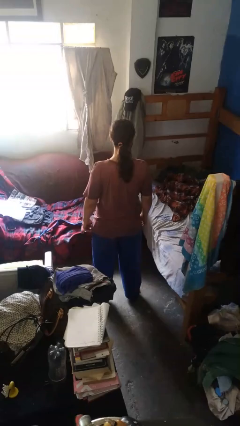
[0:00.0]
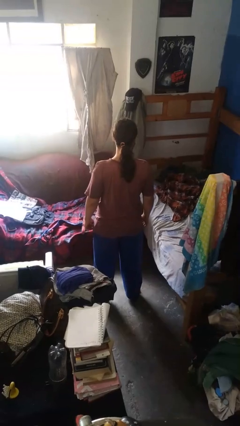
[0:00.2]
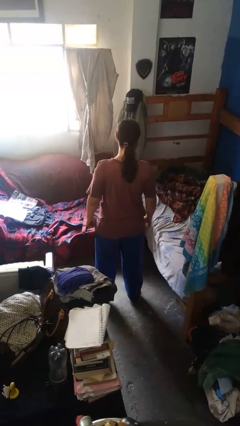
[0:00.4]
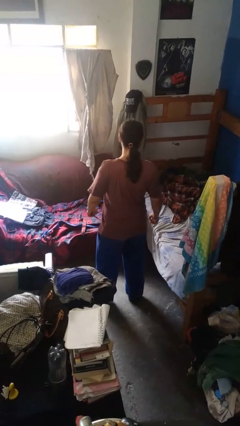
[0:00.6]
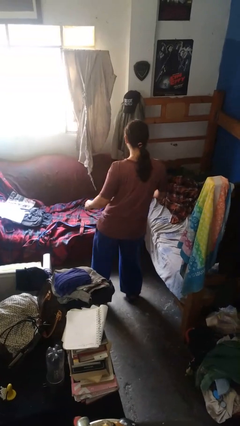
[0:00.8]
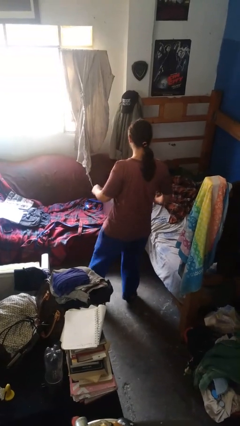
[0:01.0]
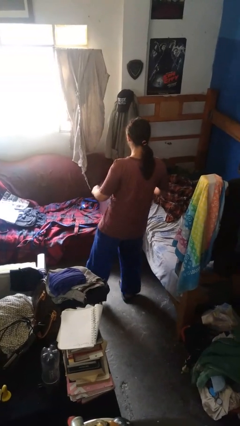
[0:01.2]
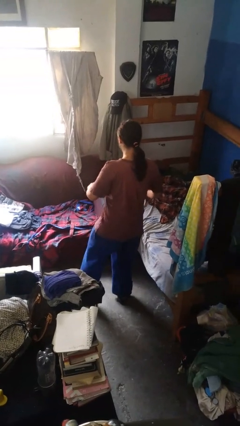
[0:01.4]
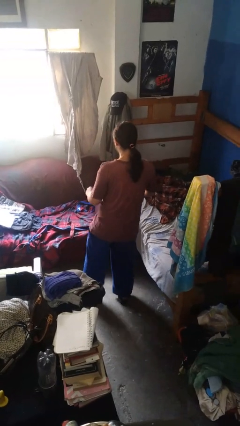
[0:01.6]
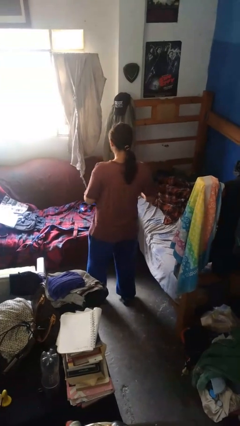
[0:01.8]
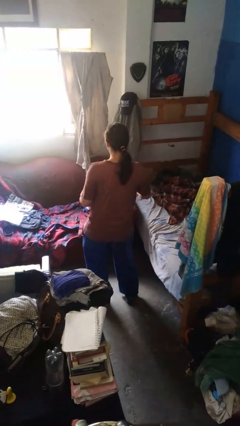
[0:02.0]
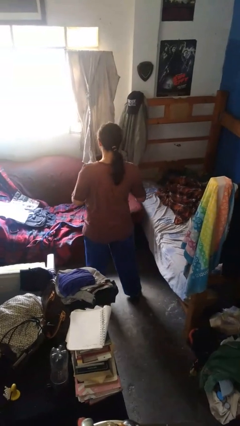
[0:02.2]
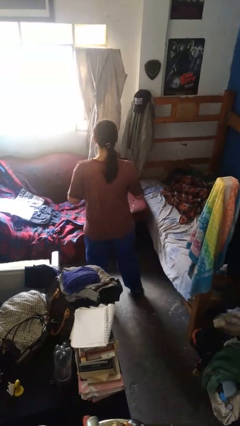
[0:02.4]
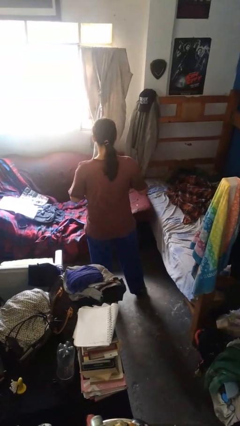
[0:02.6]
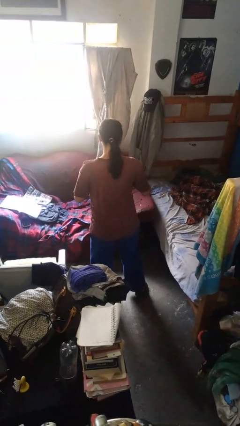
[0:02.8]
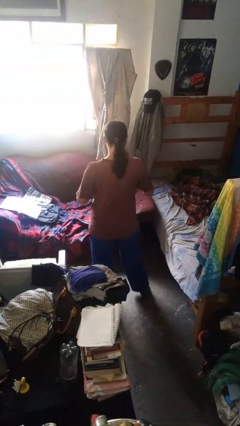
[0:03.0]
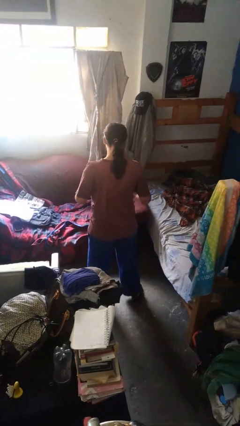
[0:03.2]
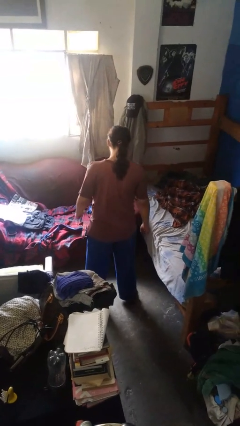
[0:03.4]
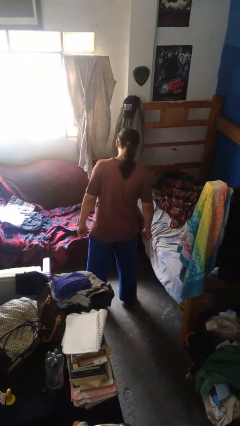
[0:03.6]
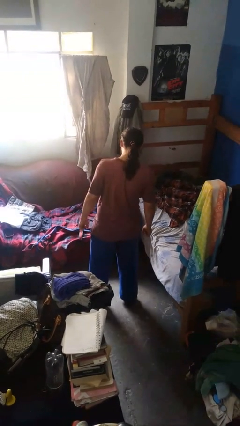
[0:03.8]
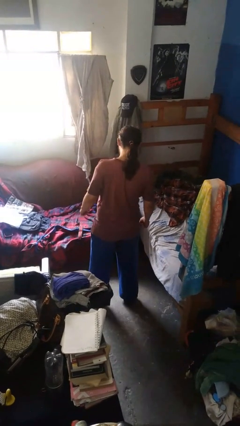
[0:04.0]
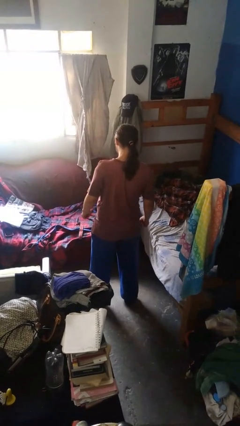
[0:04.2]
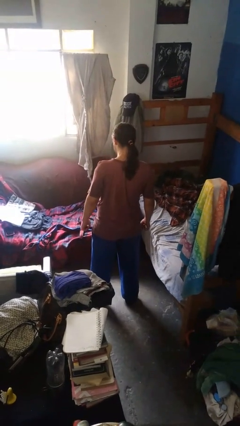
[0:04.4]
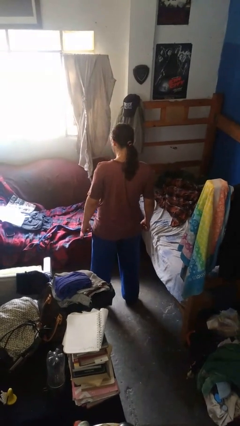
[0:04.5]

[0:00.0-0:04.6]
person wiggles hips

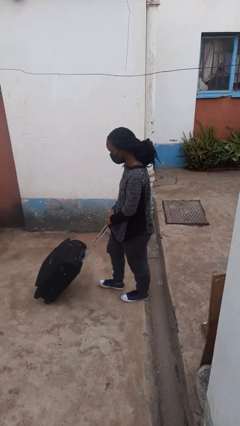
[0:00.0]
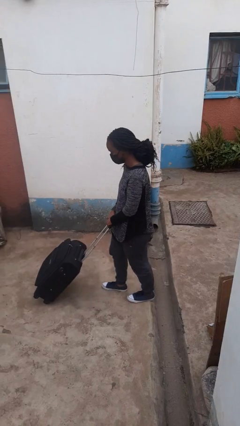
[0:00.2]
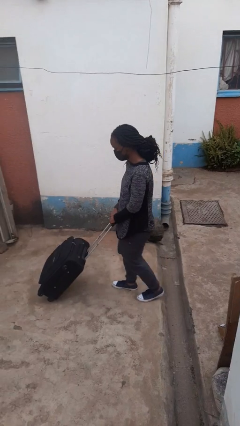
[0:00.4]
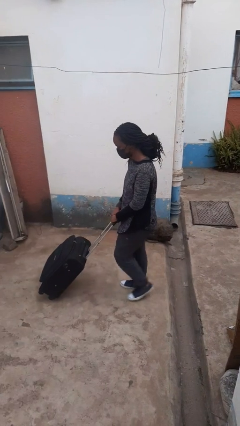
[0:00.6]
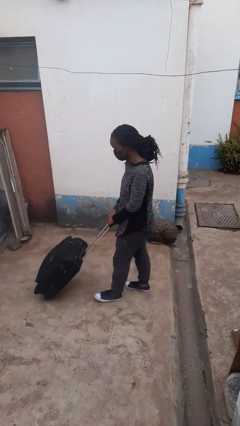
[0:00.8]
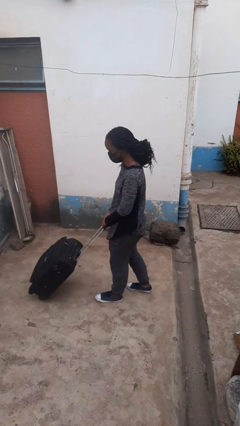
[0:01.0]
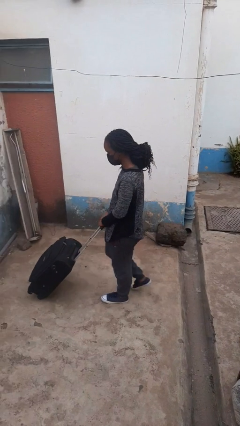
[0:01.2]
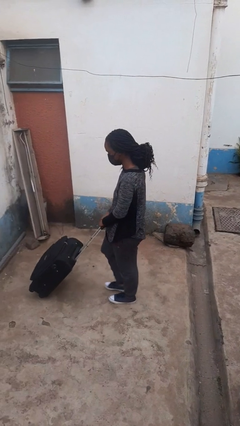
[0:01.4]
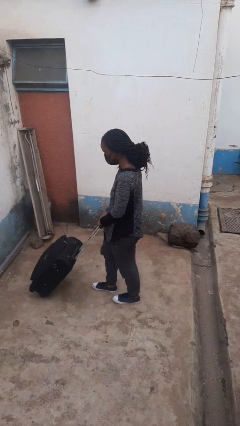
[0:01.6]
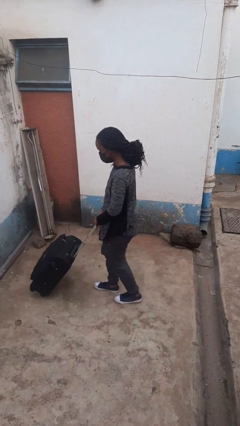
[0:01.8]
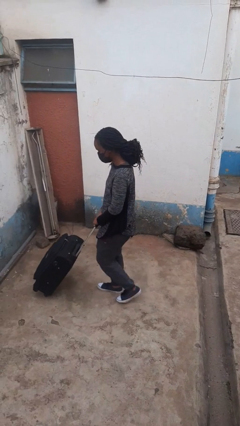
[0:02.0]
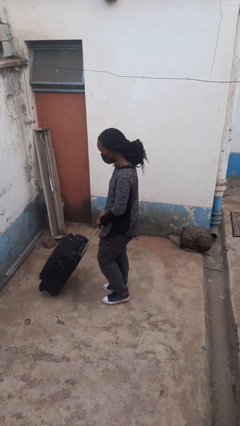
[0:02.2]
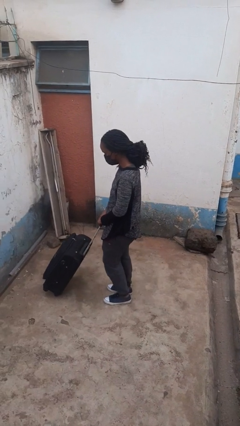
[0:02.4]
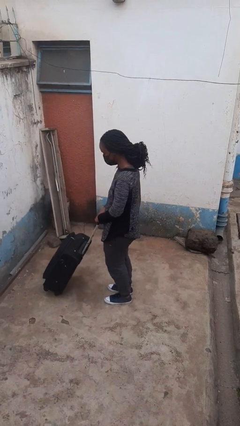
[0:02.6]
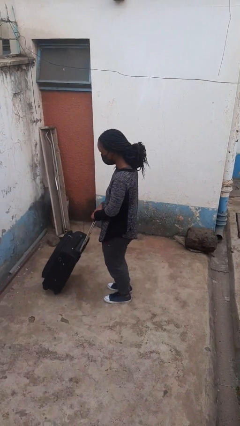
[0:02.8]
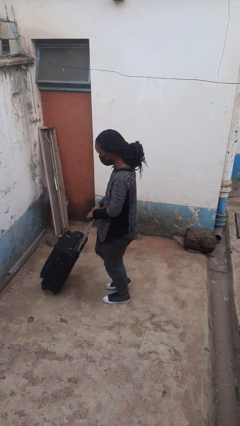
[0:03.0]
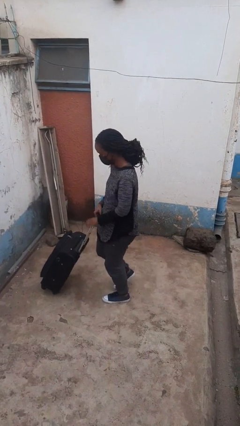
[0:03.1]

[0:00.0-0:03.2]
person pushes wheeled cart

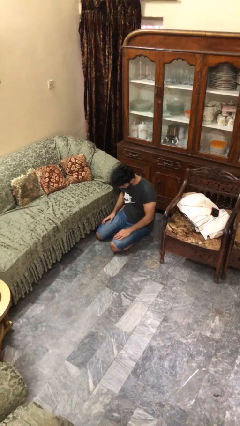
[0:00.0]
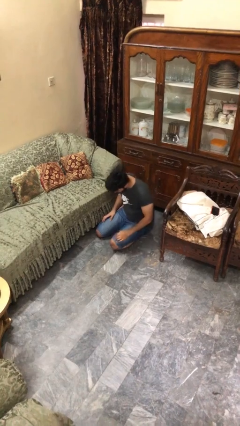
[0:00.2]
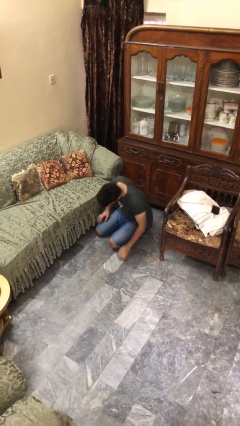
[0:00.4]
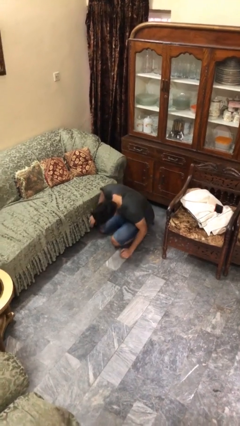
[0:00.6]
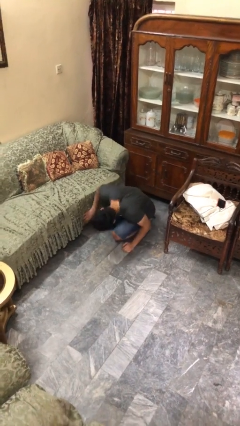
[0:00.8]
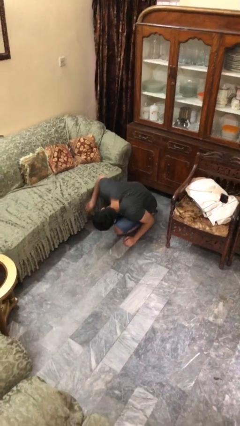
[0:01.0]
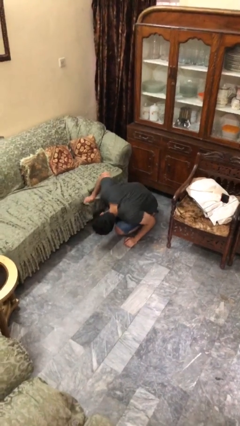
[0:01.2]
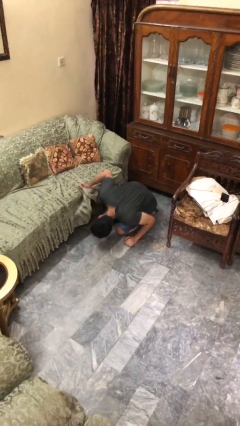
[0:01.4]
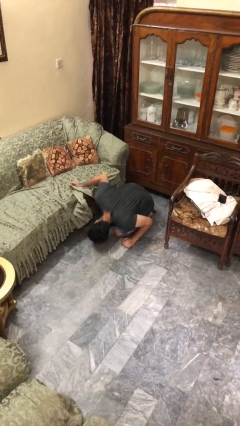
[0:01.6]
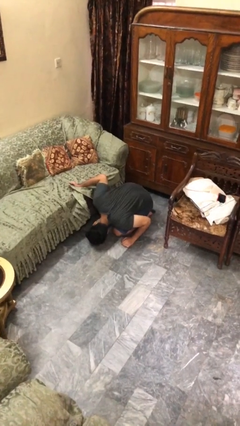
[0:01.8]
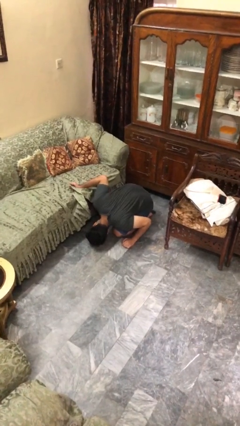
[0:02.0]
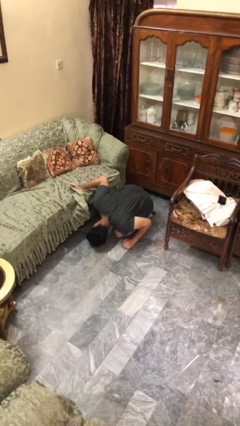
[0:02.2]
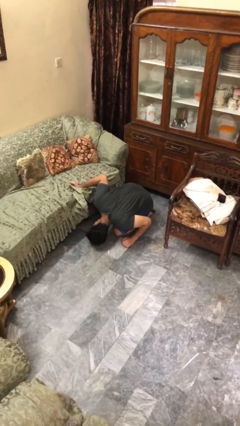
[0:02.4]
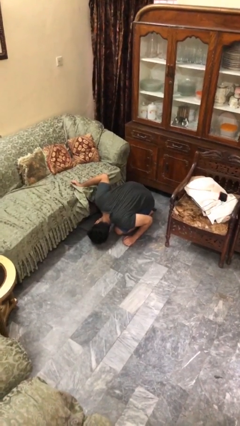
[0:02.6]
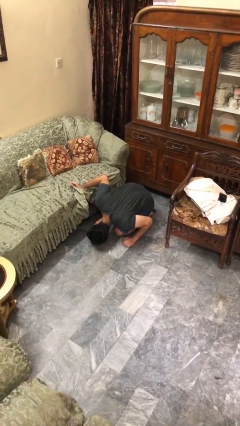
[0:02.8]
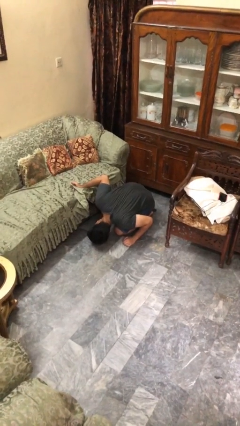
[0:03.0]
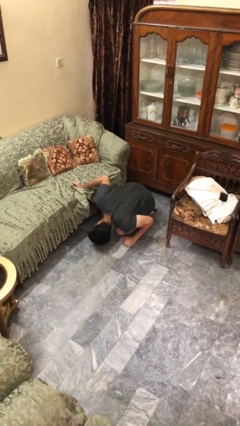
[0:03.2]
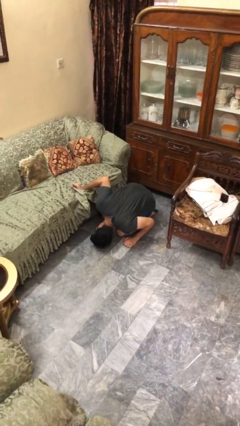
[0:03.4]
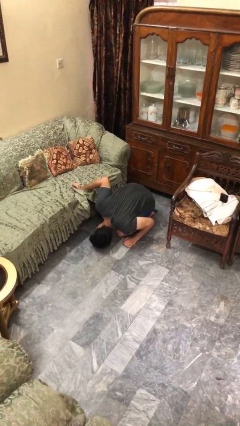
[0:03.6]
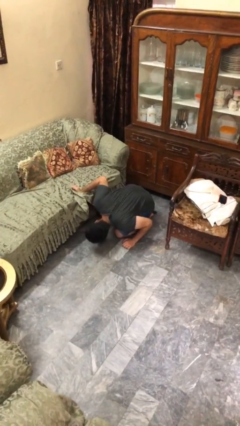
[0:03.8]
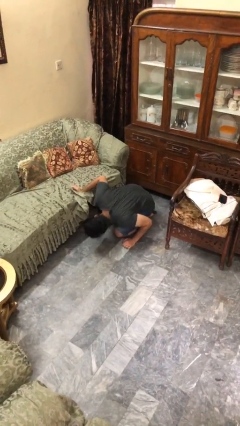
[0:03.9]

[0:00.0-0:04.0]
person searches under couch

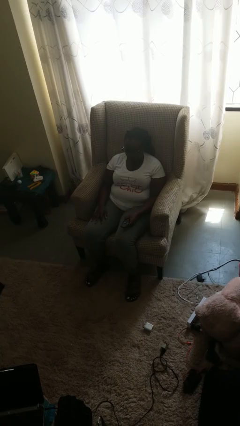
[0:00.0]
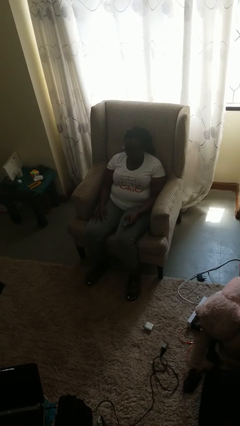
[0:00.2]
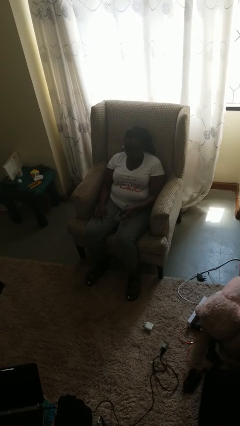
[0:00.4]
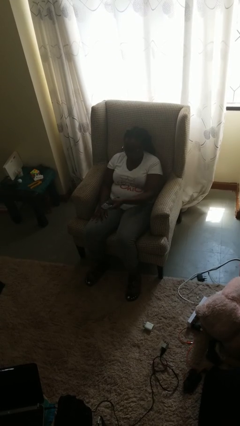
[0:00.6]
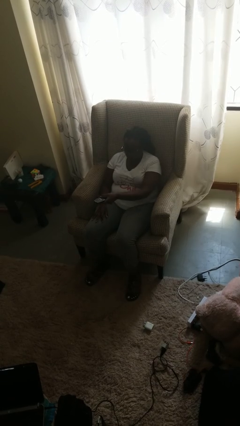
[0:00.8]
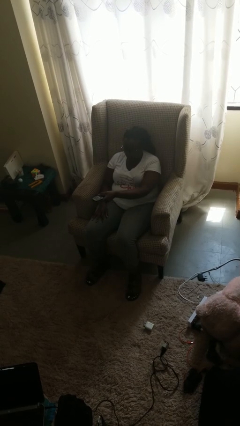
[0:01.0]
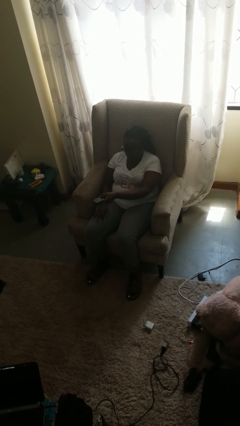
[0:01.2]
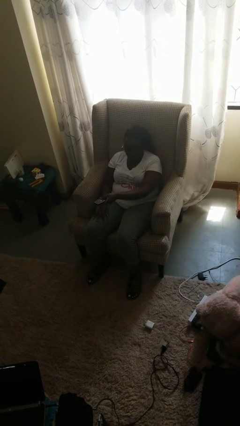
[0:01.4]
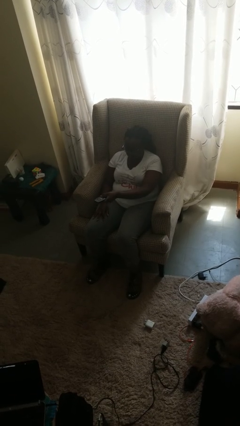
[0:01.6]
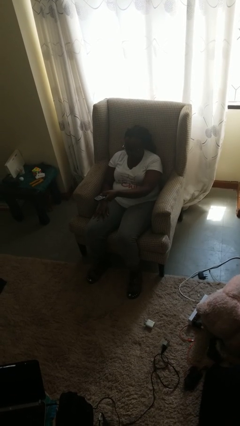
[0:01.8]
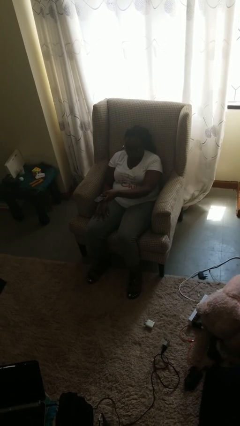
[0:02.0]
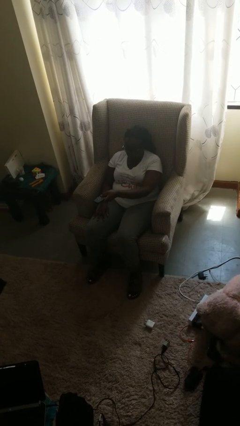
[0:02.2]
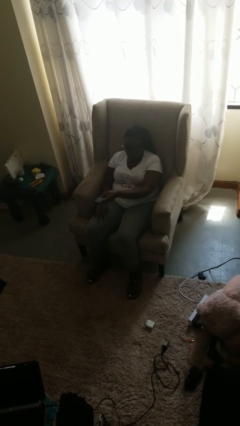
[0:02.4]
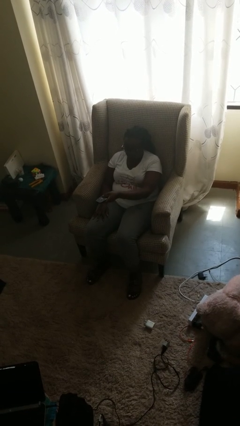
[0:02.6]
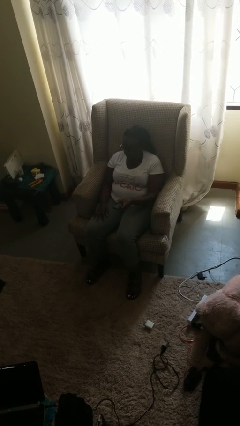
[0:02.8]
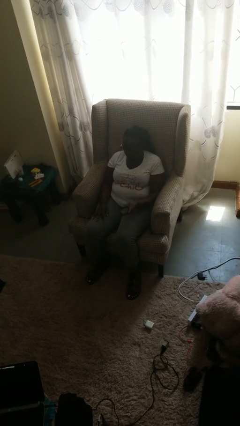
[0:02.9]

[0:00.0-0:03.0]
person uses television remote

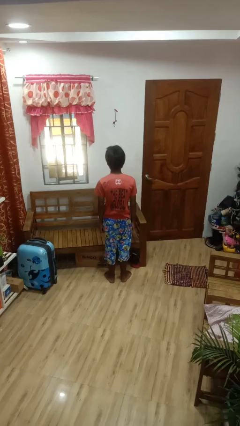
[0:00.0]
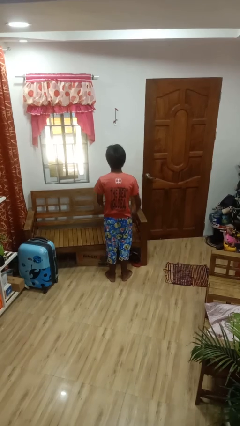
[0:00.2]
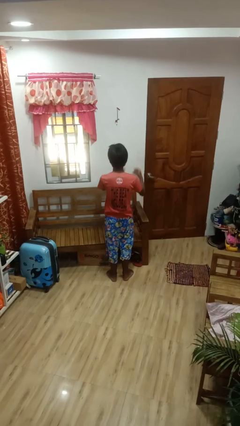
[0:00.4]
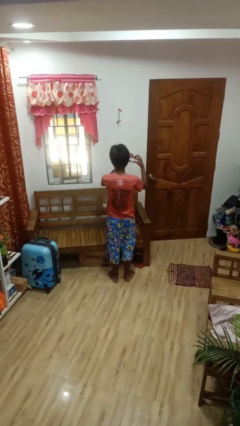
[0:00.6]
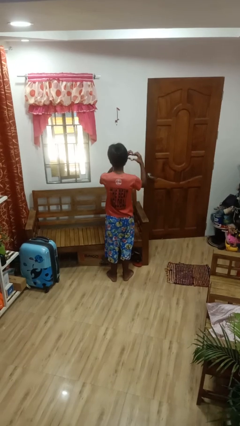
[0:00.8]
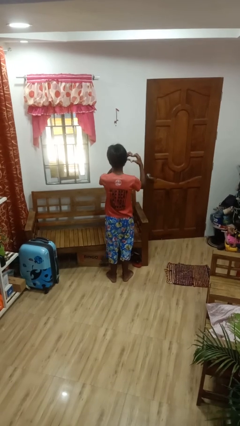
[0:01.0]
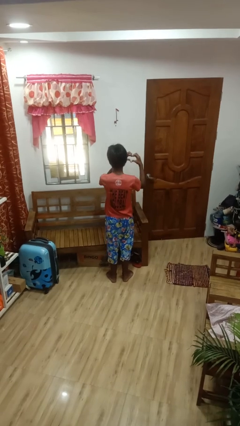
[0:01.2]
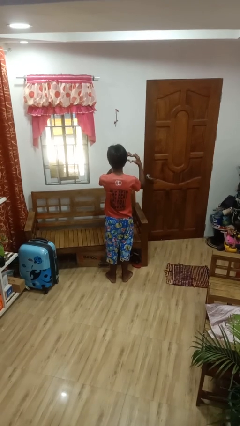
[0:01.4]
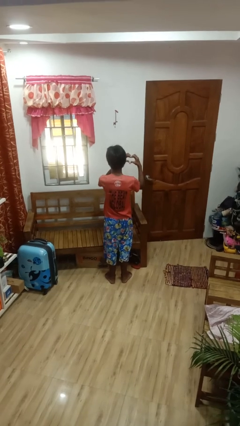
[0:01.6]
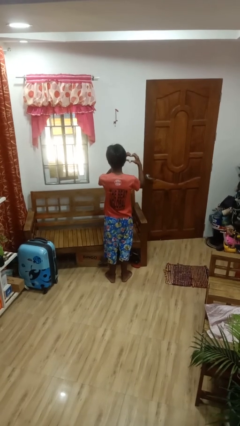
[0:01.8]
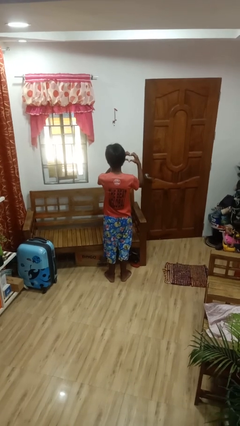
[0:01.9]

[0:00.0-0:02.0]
person gestures heart

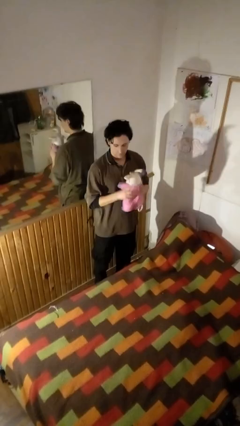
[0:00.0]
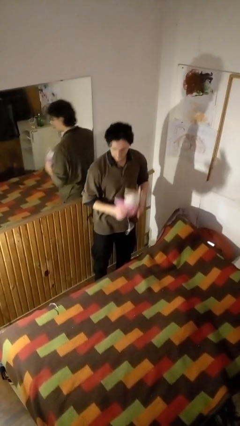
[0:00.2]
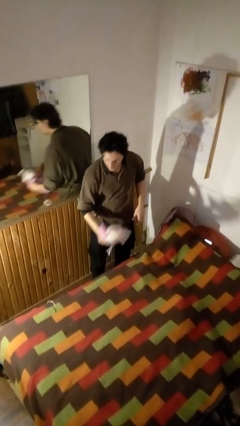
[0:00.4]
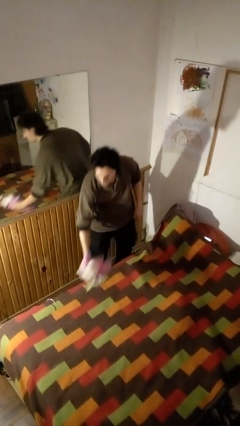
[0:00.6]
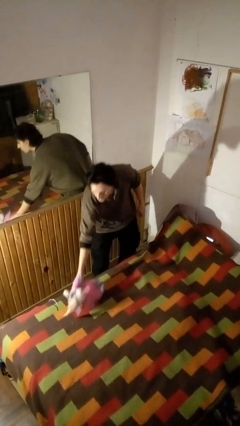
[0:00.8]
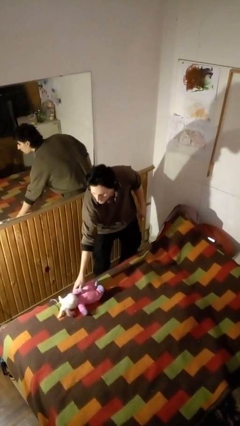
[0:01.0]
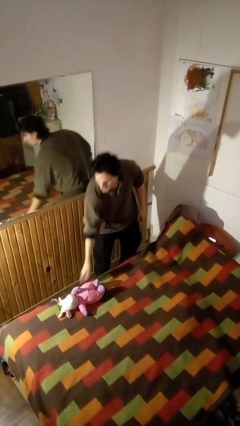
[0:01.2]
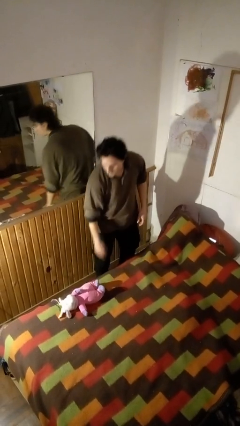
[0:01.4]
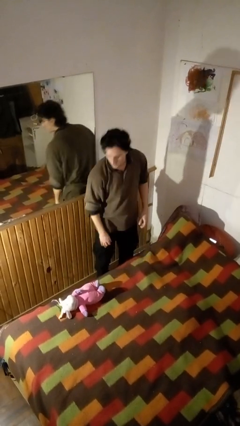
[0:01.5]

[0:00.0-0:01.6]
person puts down object on bed
